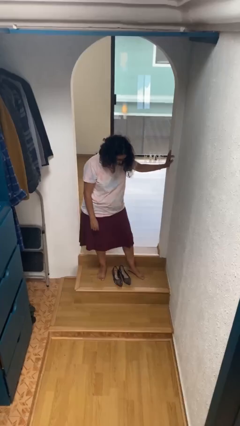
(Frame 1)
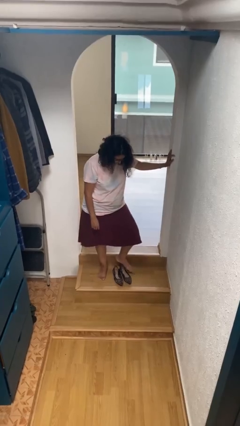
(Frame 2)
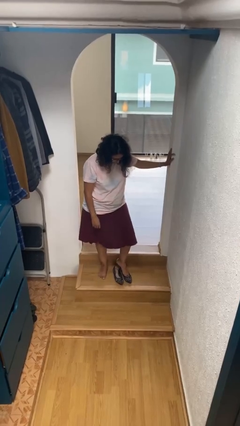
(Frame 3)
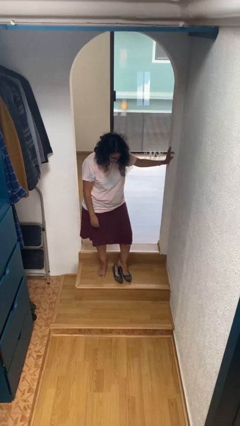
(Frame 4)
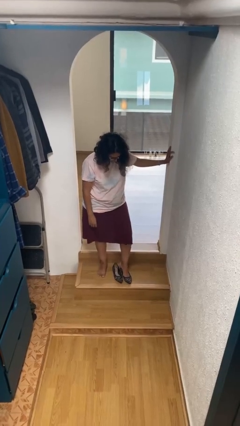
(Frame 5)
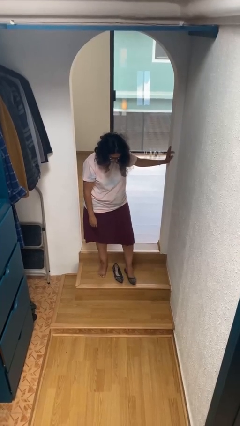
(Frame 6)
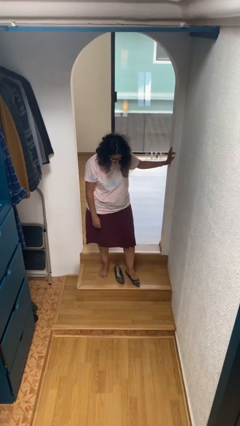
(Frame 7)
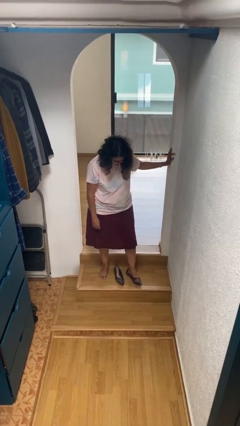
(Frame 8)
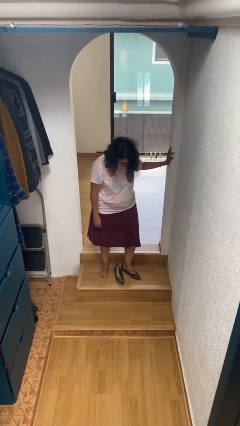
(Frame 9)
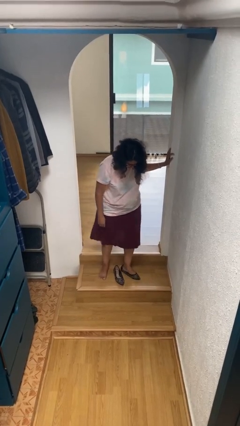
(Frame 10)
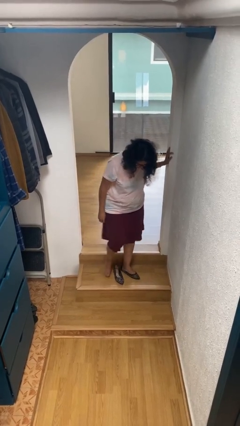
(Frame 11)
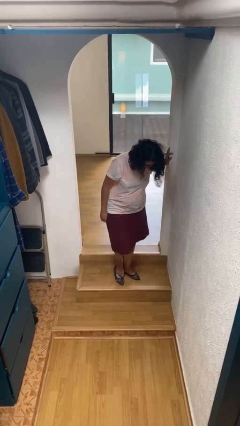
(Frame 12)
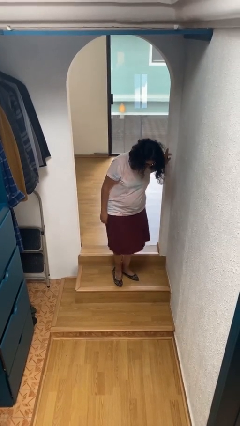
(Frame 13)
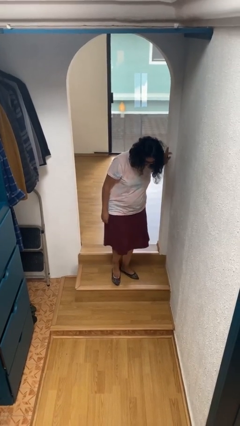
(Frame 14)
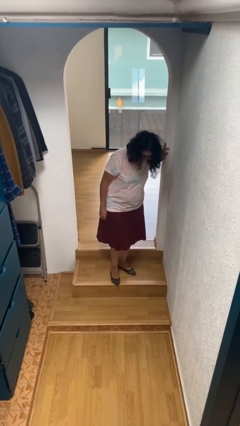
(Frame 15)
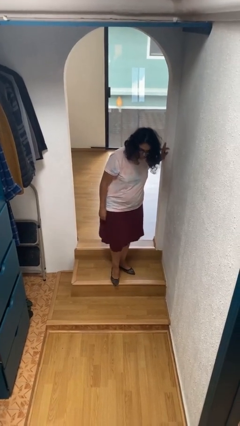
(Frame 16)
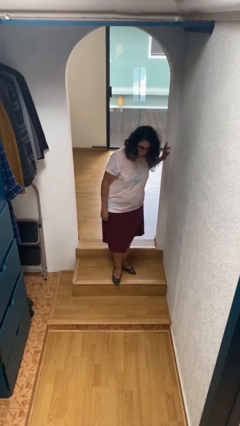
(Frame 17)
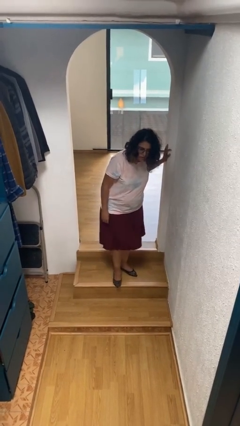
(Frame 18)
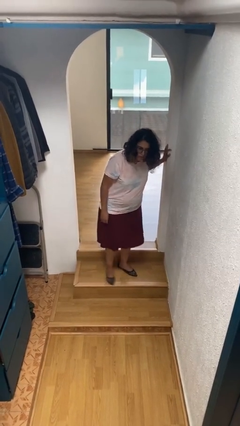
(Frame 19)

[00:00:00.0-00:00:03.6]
person puts on shoes

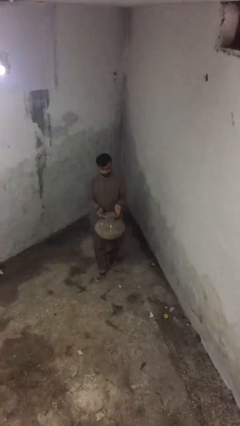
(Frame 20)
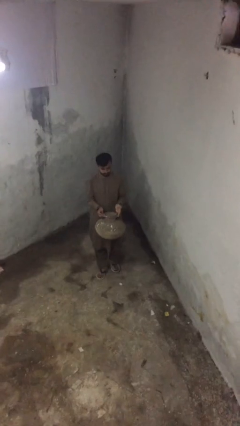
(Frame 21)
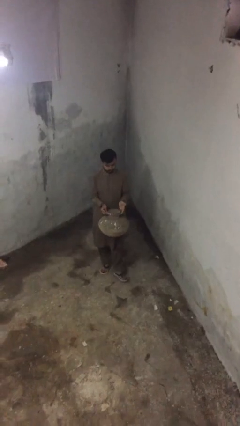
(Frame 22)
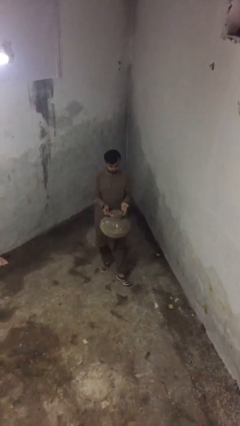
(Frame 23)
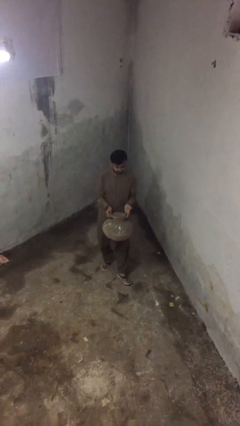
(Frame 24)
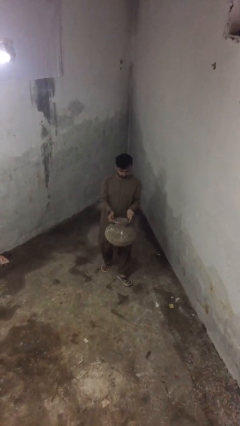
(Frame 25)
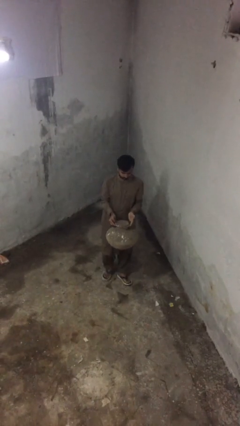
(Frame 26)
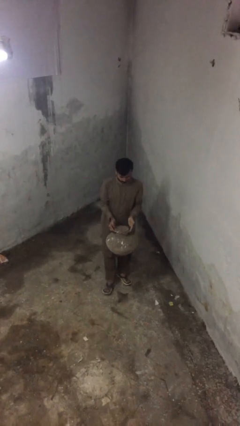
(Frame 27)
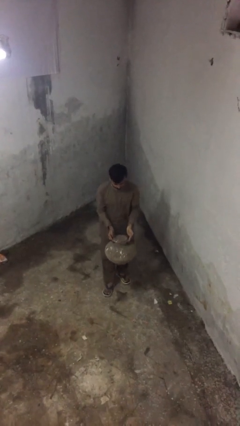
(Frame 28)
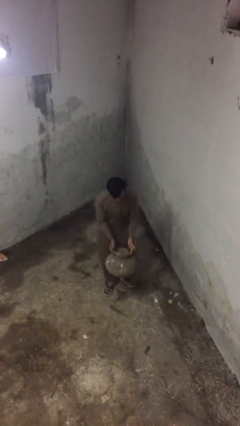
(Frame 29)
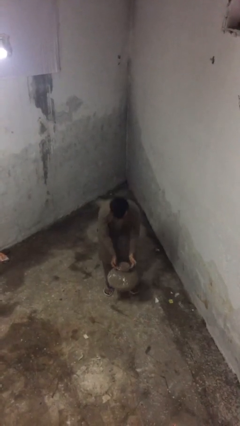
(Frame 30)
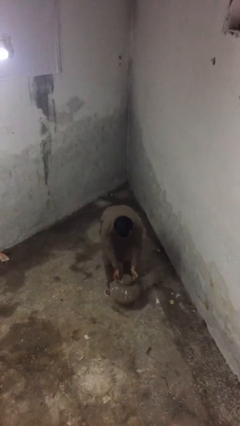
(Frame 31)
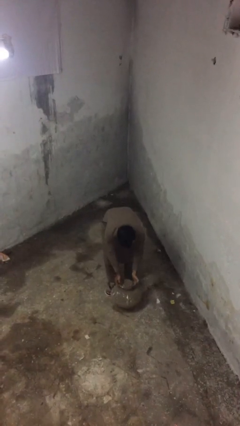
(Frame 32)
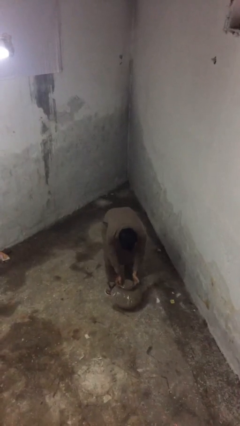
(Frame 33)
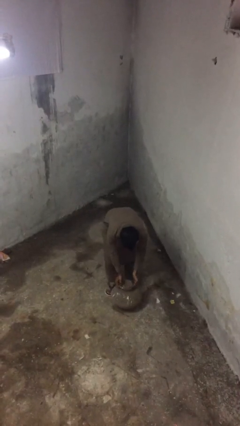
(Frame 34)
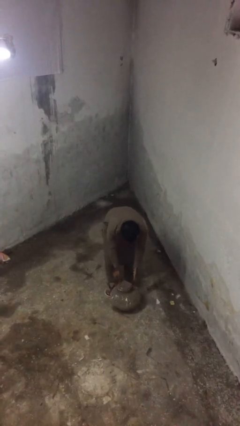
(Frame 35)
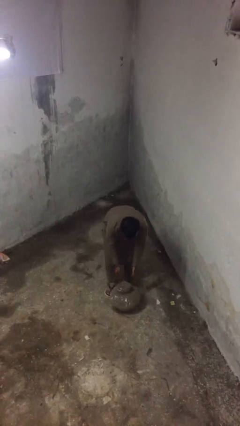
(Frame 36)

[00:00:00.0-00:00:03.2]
person puts down object on floor

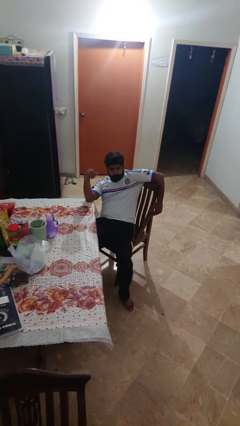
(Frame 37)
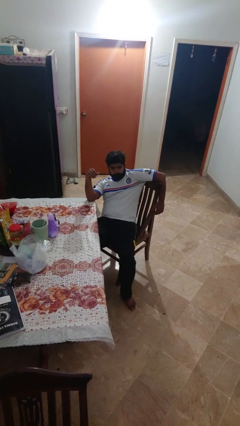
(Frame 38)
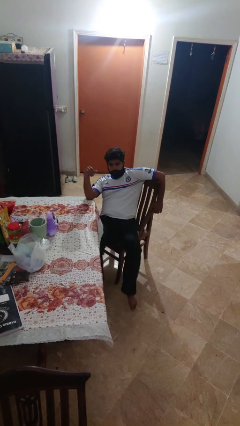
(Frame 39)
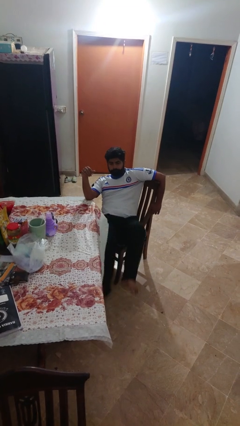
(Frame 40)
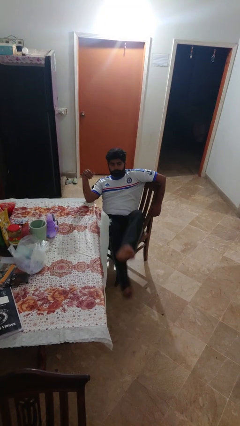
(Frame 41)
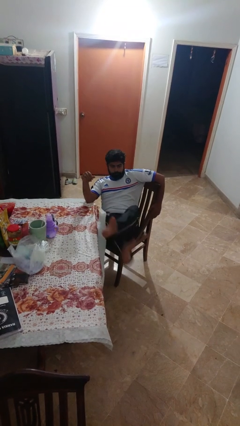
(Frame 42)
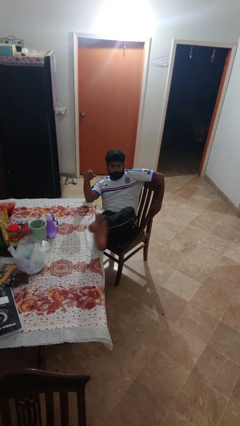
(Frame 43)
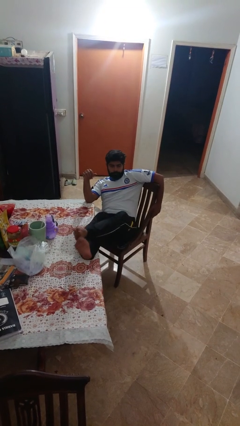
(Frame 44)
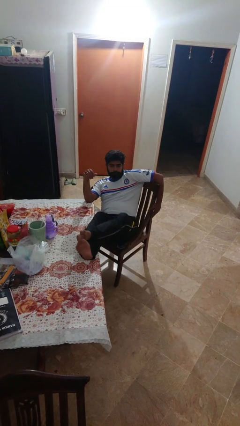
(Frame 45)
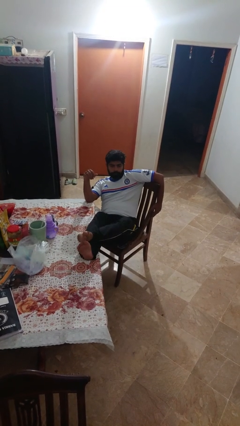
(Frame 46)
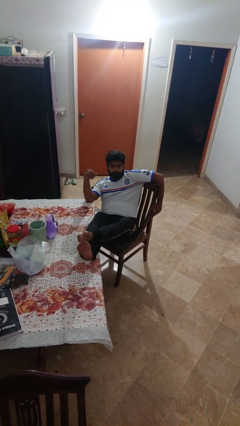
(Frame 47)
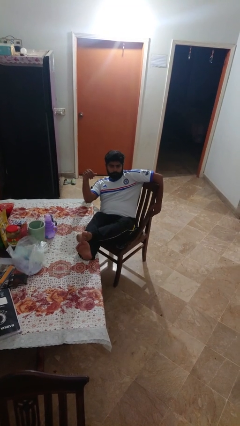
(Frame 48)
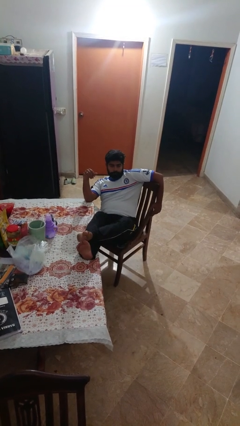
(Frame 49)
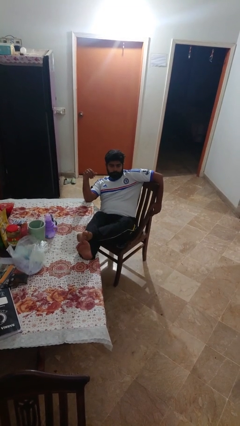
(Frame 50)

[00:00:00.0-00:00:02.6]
person puts feet up

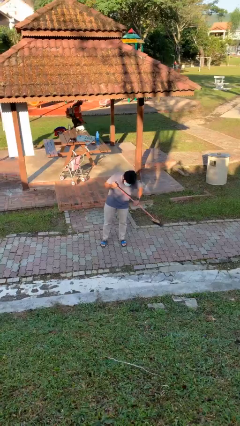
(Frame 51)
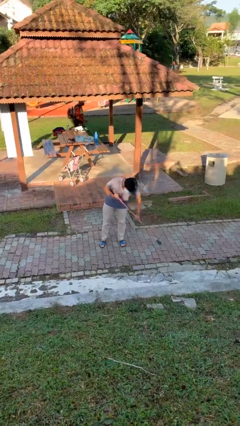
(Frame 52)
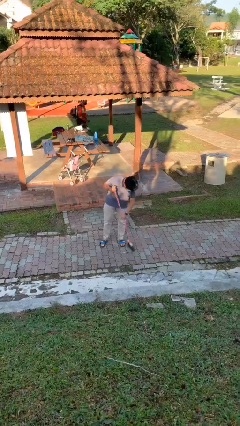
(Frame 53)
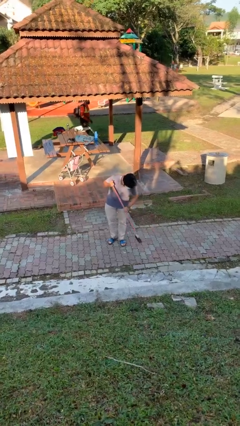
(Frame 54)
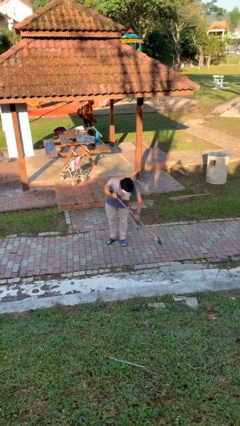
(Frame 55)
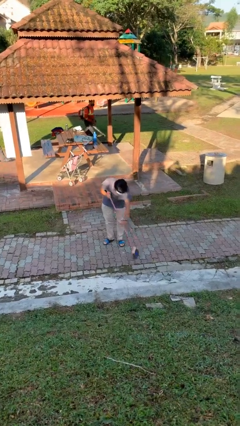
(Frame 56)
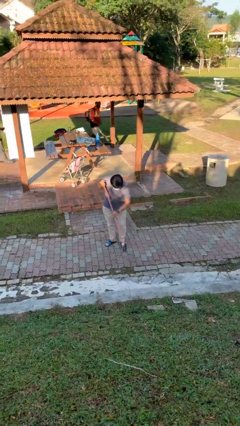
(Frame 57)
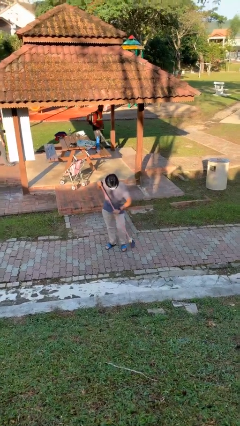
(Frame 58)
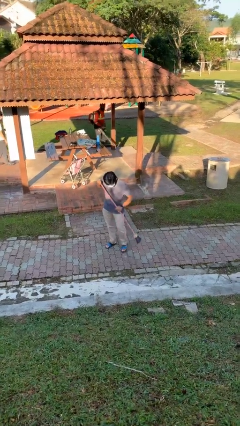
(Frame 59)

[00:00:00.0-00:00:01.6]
person sweeps floor

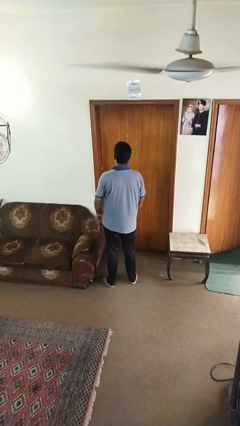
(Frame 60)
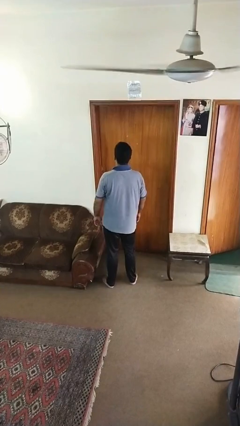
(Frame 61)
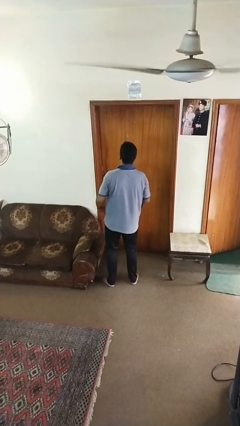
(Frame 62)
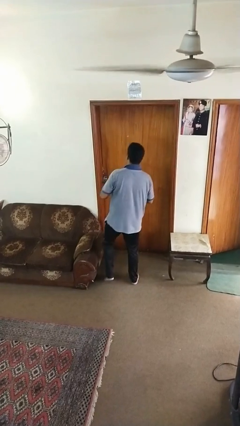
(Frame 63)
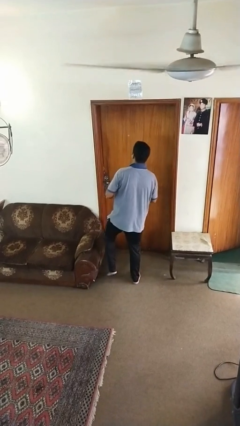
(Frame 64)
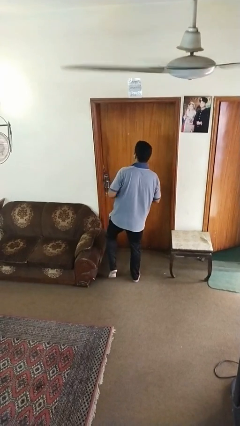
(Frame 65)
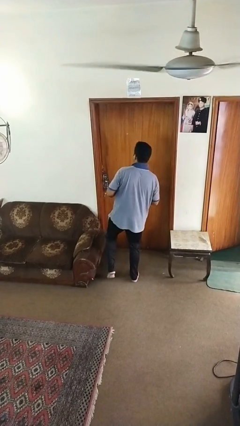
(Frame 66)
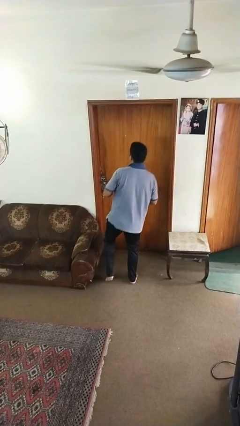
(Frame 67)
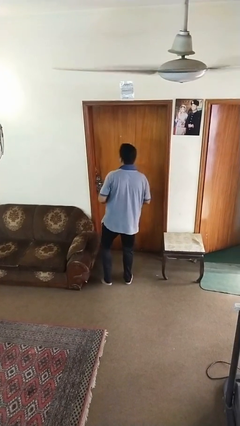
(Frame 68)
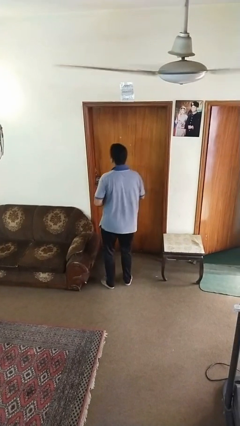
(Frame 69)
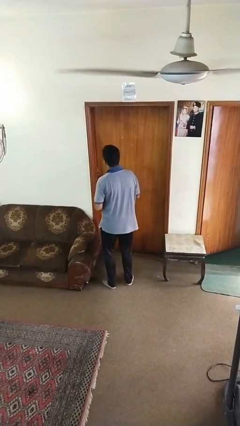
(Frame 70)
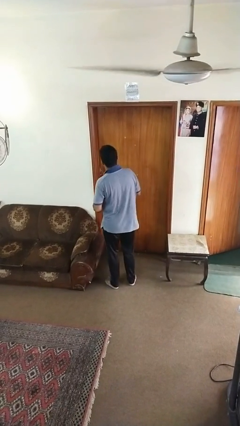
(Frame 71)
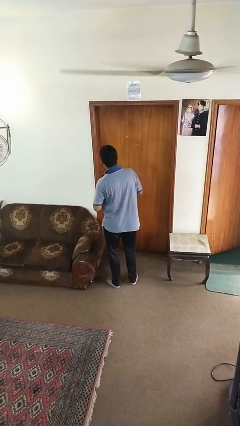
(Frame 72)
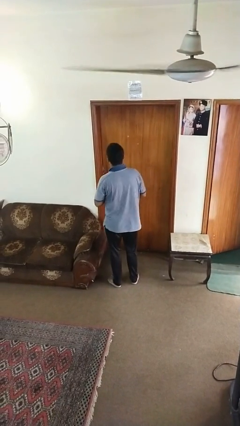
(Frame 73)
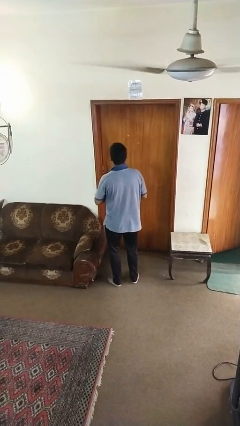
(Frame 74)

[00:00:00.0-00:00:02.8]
person dances in place

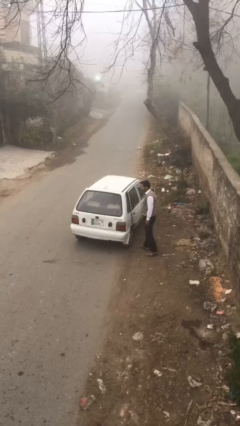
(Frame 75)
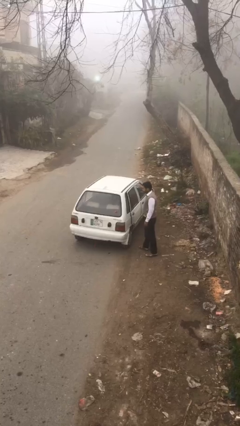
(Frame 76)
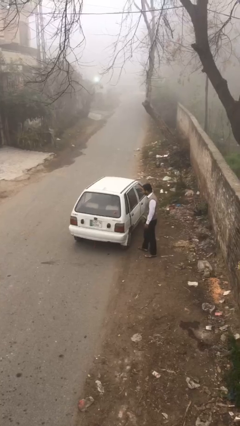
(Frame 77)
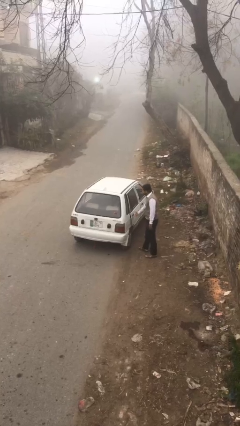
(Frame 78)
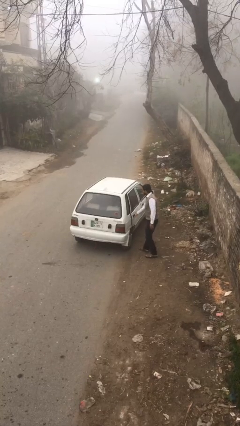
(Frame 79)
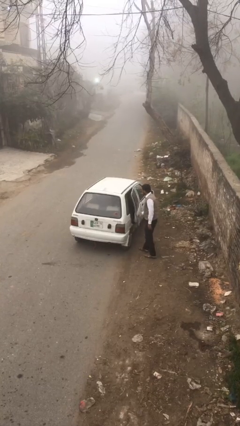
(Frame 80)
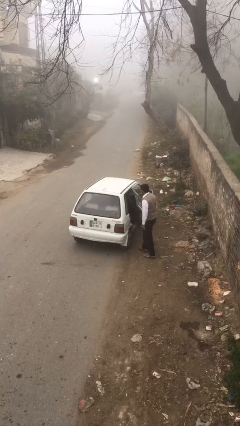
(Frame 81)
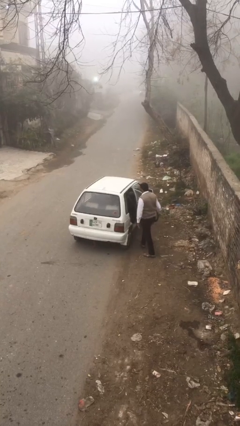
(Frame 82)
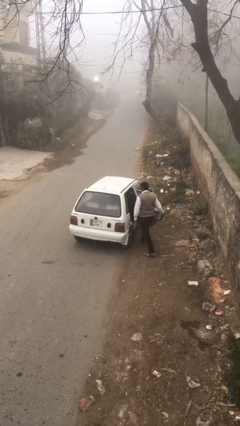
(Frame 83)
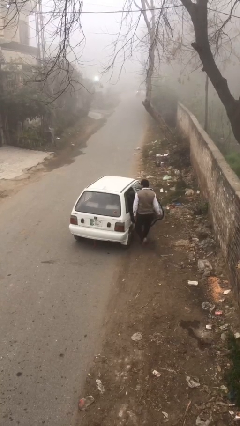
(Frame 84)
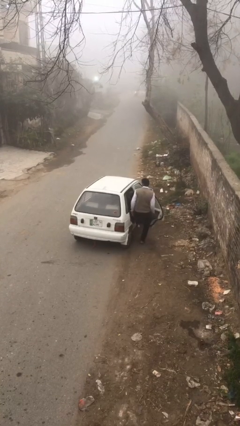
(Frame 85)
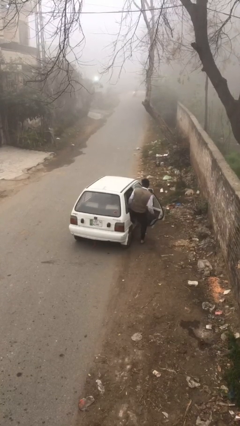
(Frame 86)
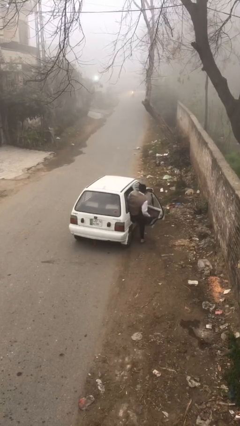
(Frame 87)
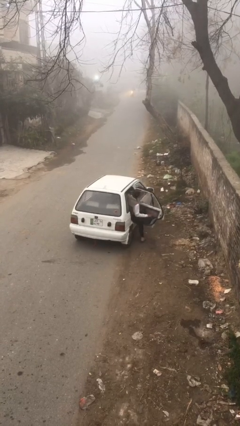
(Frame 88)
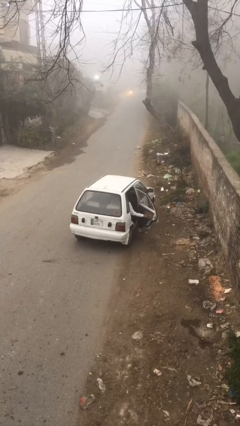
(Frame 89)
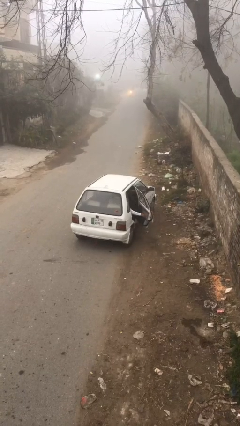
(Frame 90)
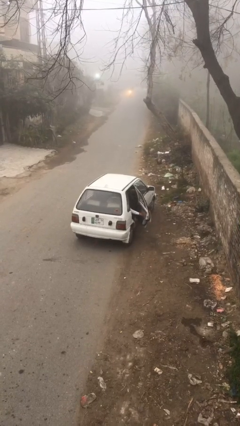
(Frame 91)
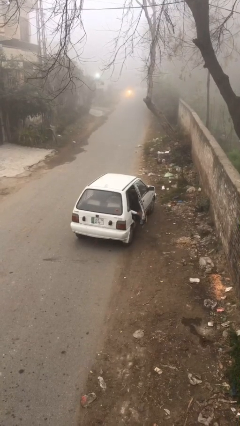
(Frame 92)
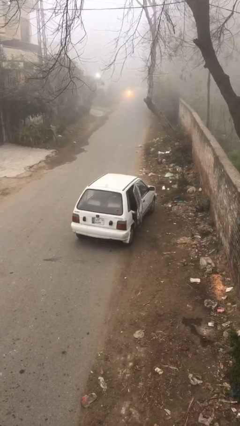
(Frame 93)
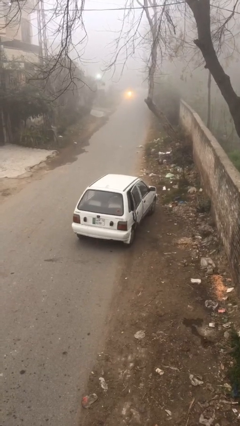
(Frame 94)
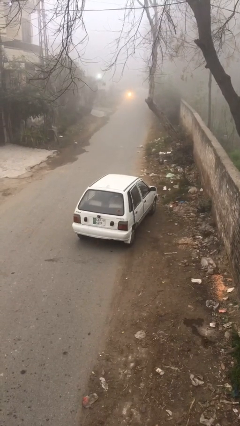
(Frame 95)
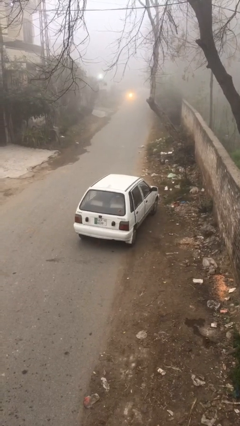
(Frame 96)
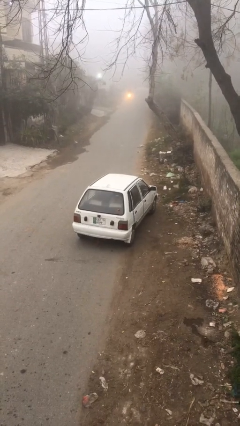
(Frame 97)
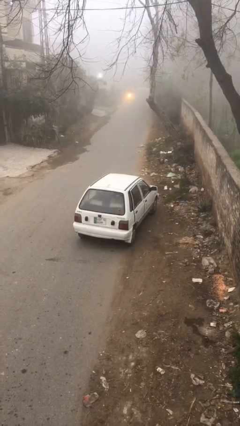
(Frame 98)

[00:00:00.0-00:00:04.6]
car picks up person
